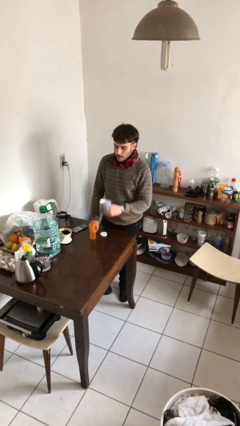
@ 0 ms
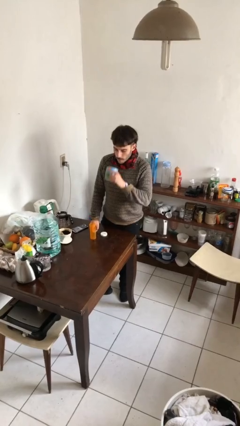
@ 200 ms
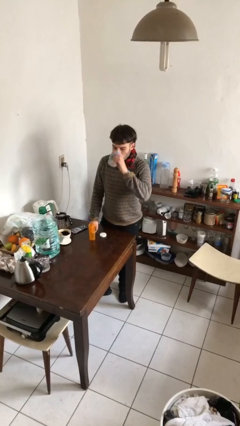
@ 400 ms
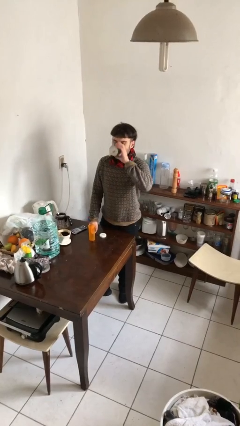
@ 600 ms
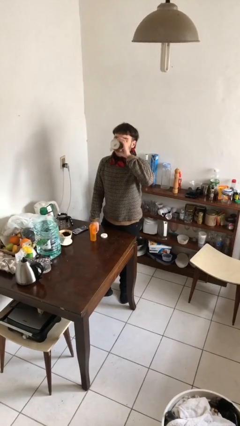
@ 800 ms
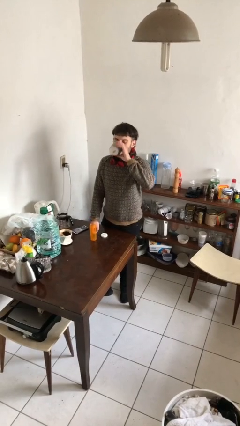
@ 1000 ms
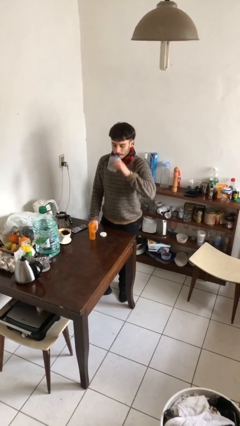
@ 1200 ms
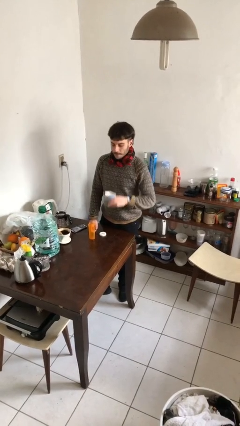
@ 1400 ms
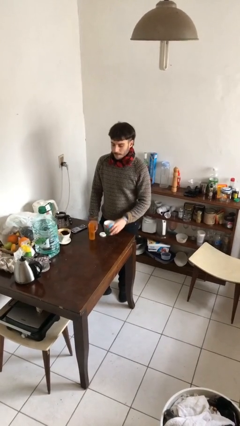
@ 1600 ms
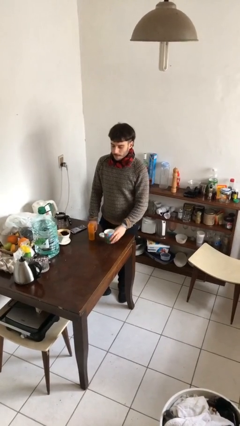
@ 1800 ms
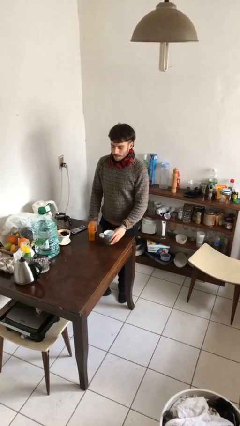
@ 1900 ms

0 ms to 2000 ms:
person drinks from cup

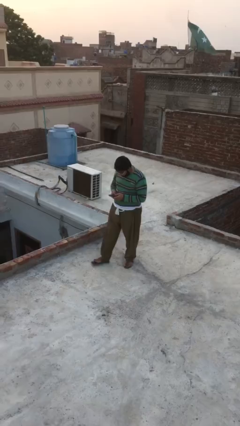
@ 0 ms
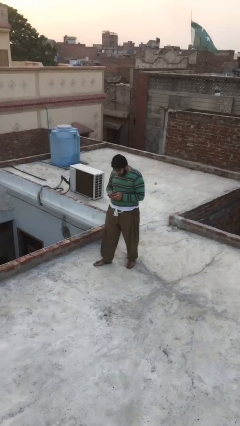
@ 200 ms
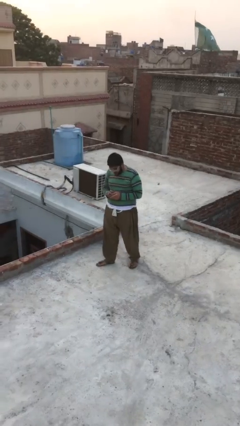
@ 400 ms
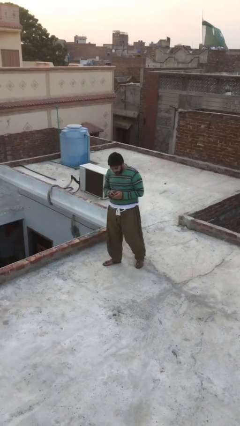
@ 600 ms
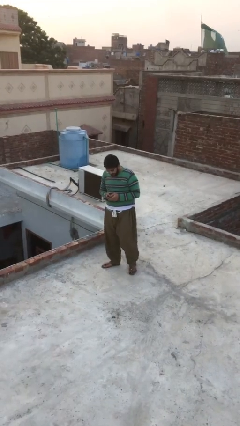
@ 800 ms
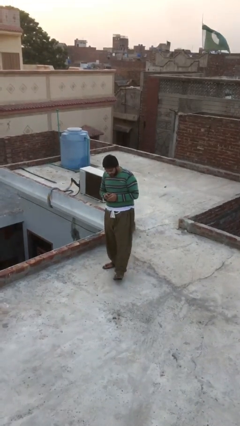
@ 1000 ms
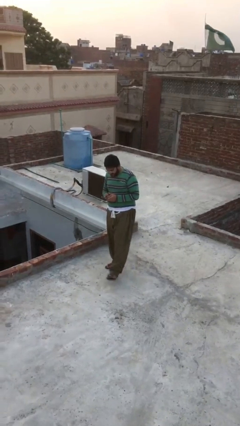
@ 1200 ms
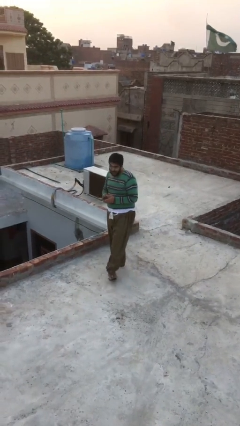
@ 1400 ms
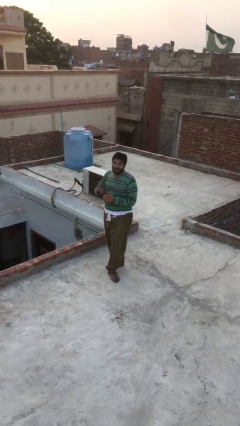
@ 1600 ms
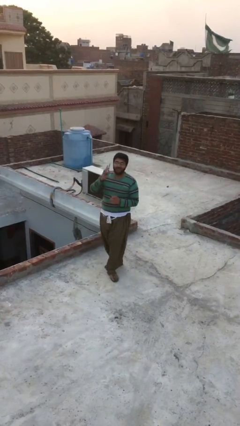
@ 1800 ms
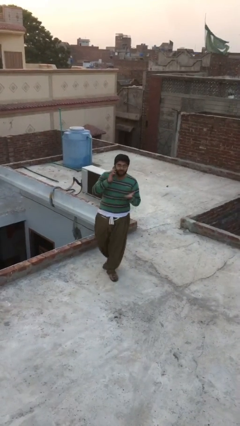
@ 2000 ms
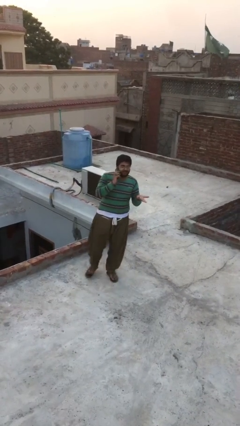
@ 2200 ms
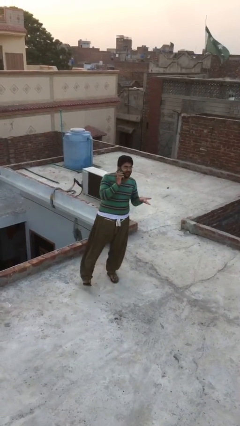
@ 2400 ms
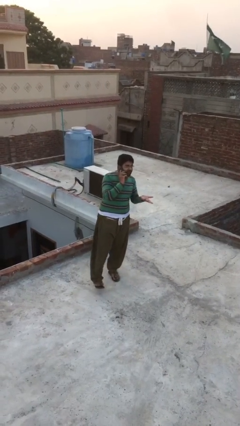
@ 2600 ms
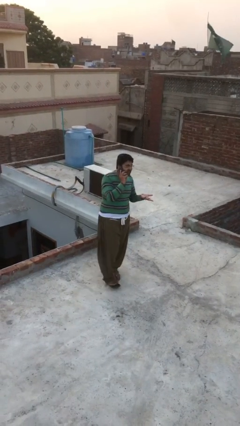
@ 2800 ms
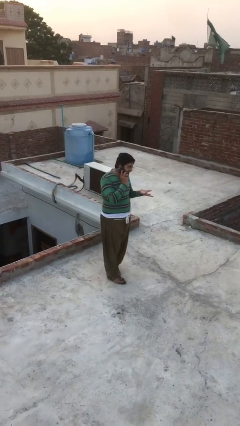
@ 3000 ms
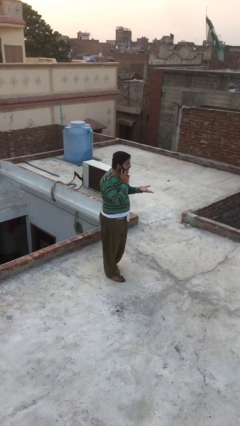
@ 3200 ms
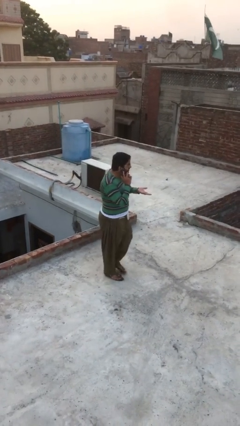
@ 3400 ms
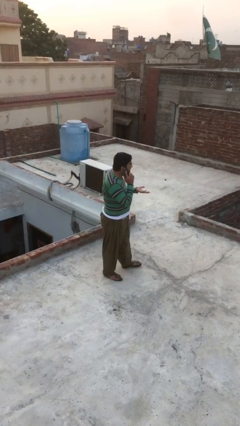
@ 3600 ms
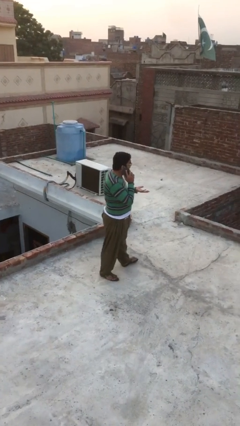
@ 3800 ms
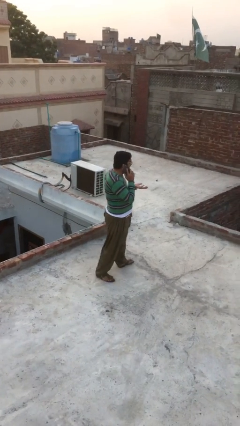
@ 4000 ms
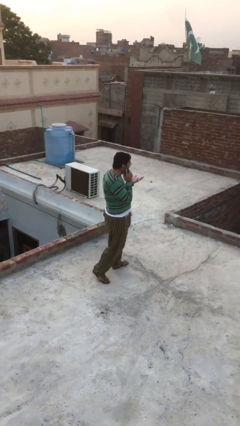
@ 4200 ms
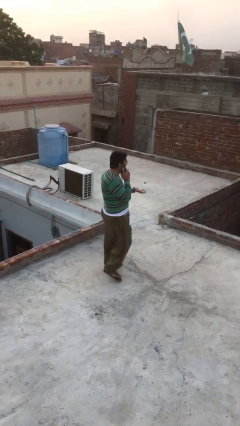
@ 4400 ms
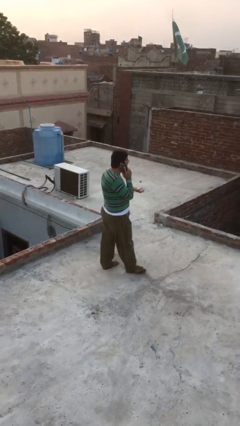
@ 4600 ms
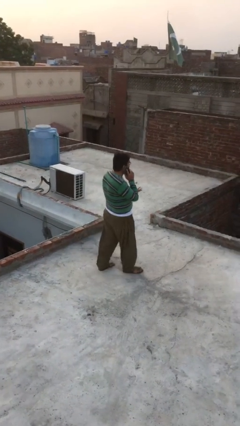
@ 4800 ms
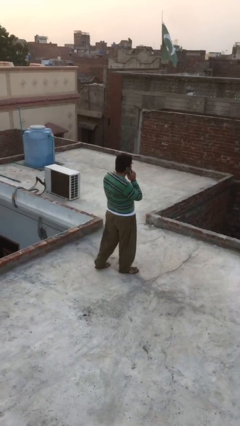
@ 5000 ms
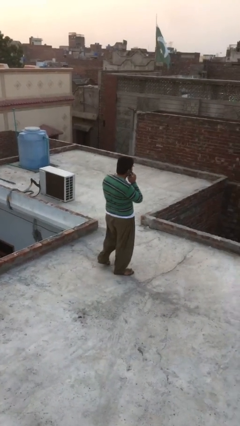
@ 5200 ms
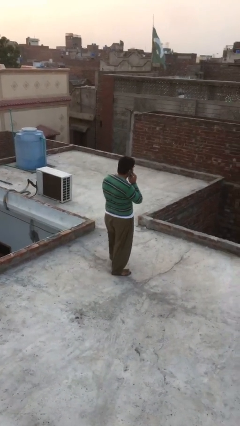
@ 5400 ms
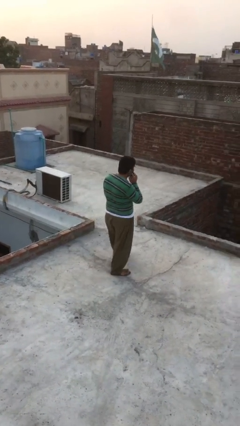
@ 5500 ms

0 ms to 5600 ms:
person talks on phone

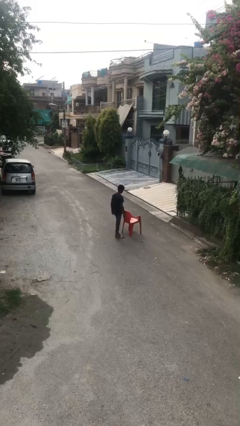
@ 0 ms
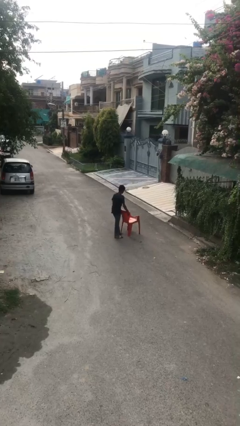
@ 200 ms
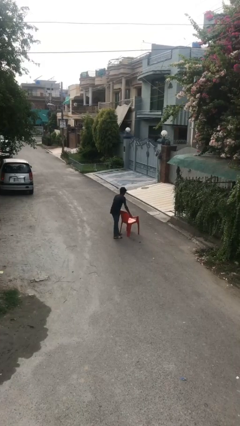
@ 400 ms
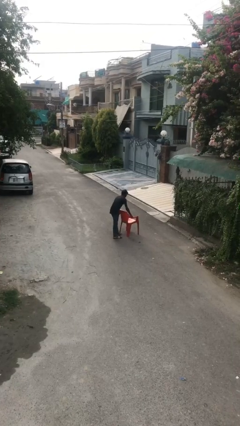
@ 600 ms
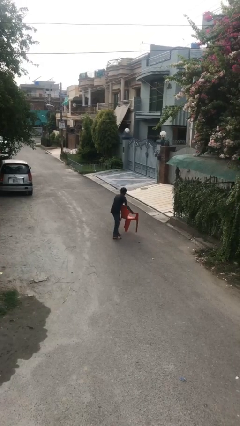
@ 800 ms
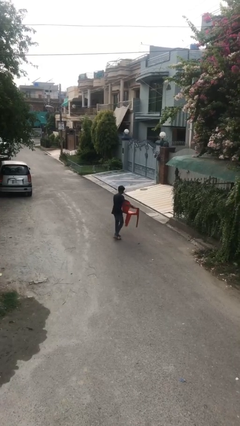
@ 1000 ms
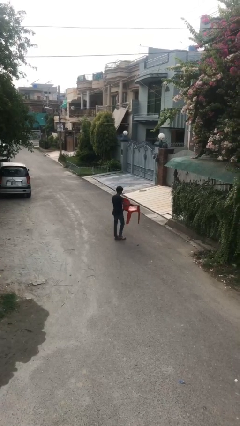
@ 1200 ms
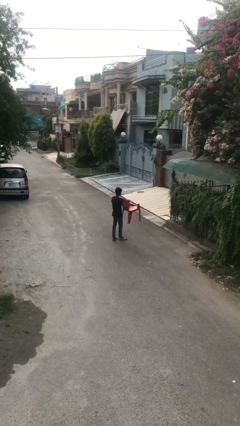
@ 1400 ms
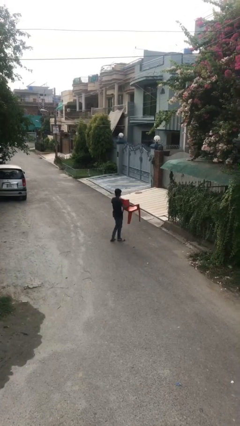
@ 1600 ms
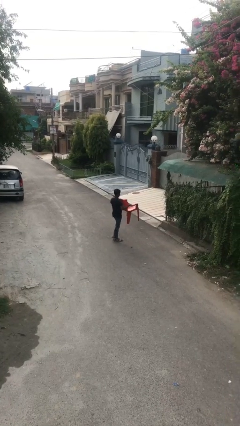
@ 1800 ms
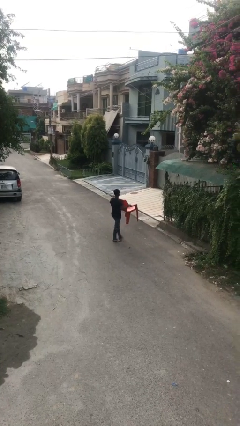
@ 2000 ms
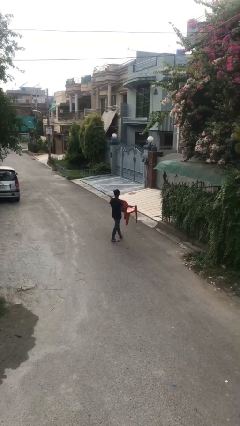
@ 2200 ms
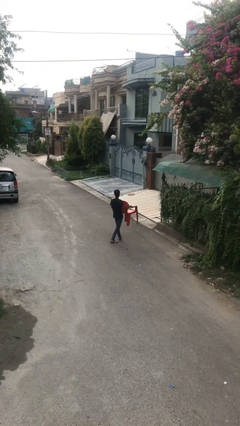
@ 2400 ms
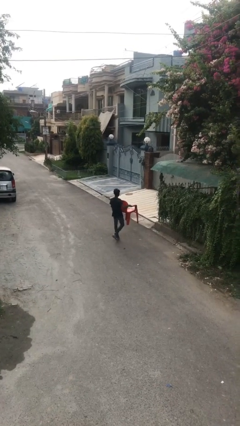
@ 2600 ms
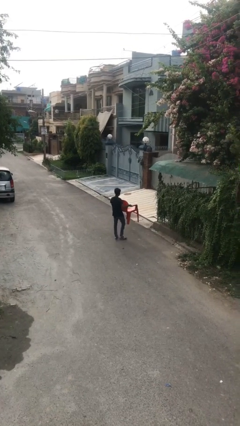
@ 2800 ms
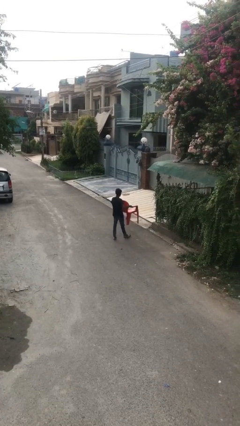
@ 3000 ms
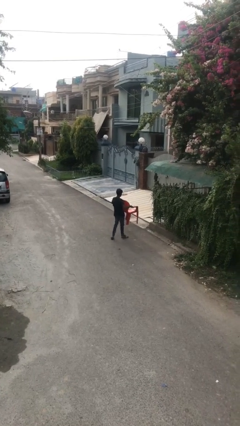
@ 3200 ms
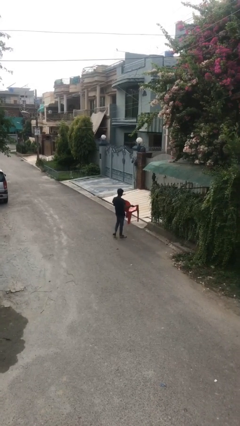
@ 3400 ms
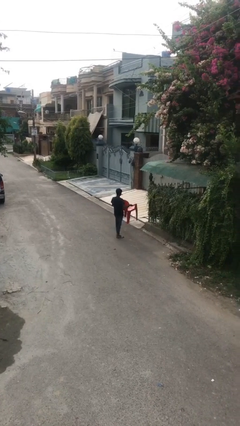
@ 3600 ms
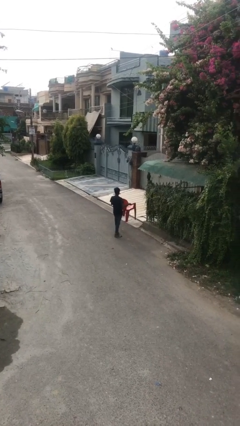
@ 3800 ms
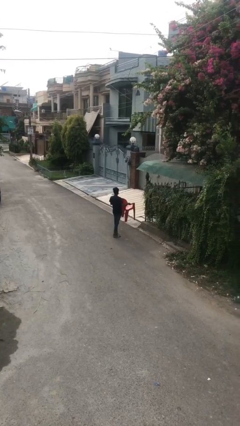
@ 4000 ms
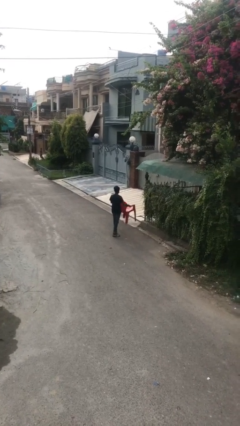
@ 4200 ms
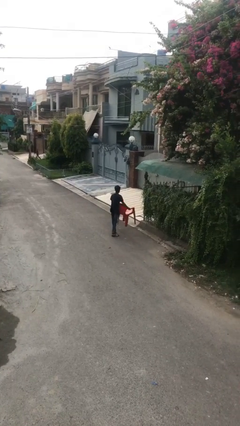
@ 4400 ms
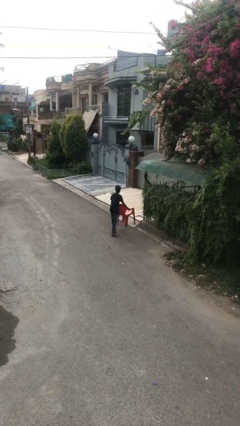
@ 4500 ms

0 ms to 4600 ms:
person carries heavy object

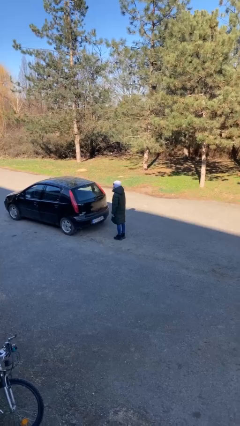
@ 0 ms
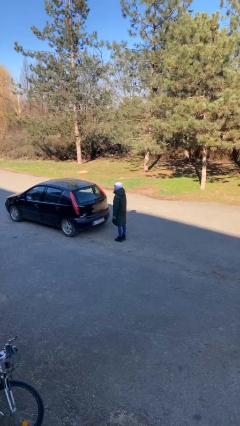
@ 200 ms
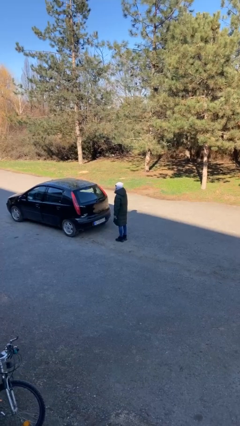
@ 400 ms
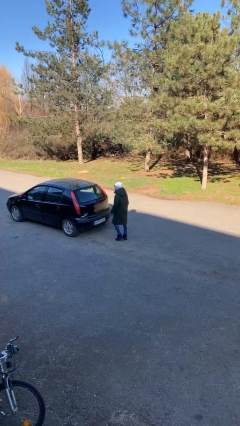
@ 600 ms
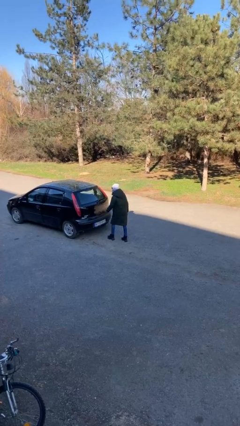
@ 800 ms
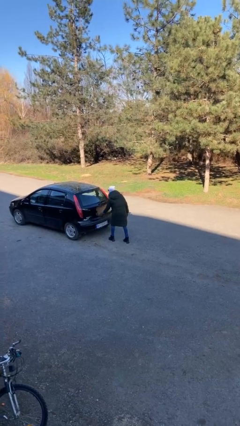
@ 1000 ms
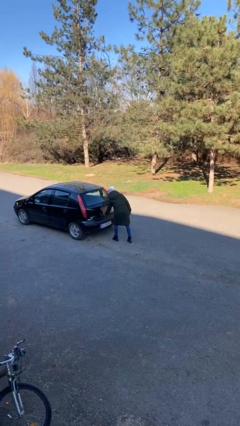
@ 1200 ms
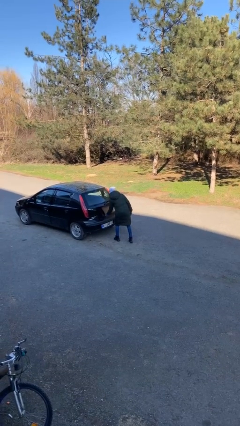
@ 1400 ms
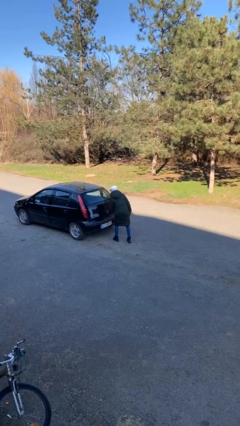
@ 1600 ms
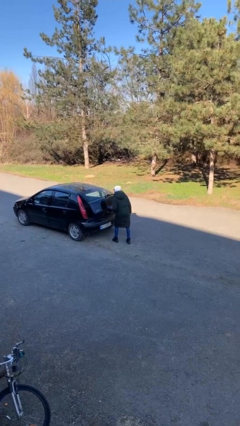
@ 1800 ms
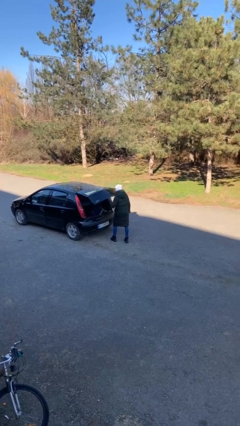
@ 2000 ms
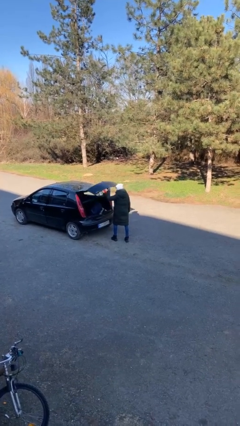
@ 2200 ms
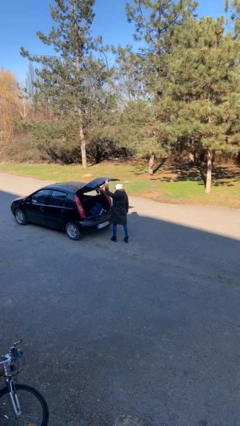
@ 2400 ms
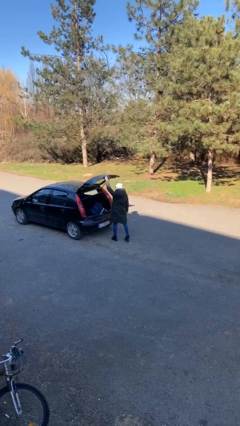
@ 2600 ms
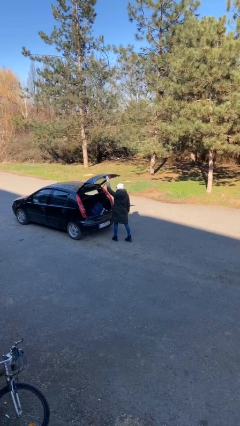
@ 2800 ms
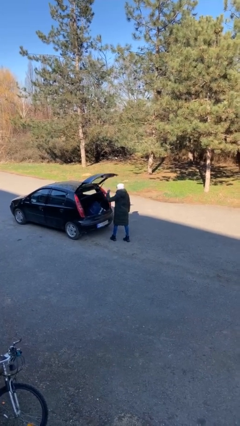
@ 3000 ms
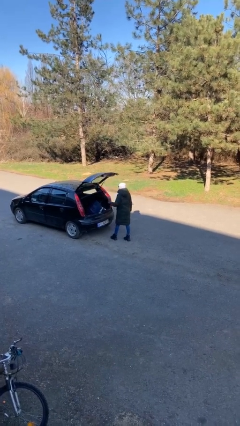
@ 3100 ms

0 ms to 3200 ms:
person opens car trunk

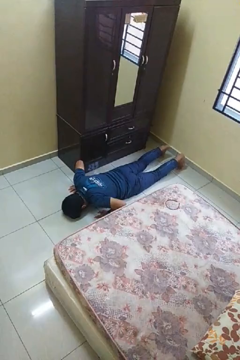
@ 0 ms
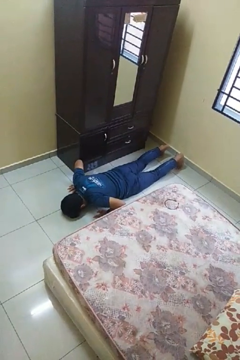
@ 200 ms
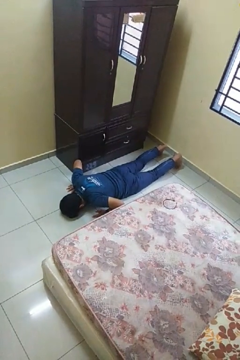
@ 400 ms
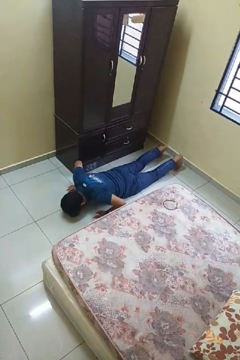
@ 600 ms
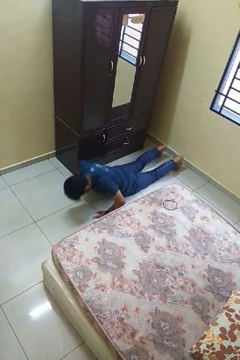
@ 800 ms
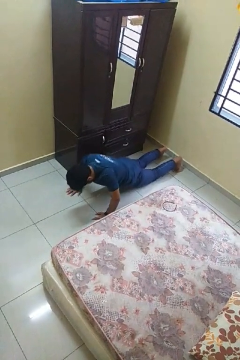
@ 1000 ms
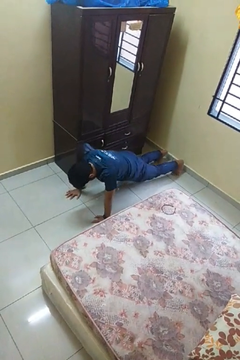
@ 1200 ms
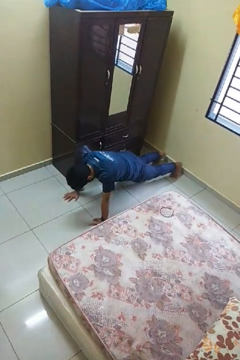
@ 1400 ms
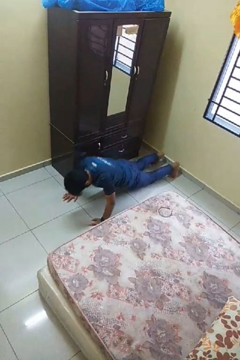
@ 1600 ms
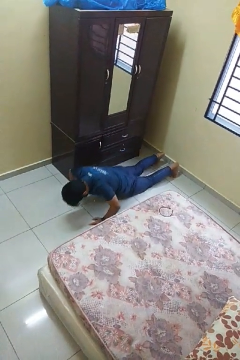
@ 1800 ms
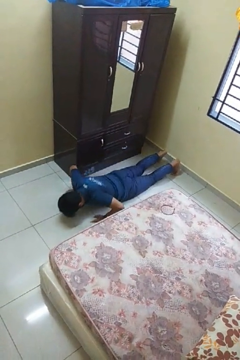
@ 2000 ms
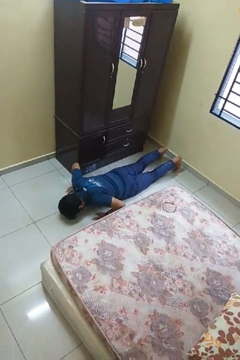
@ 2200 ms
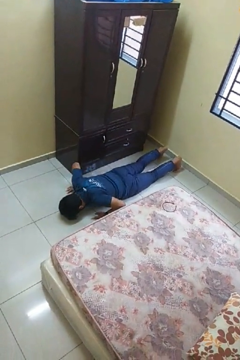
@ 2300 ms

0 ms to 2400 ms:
person exercises with pushup

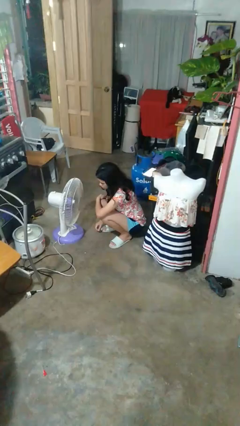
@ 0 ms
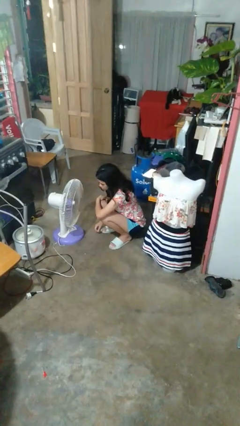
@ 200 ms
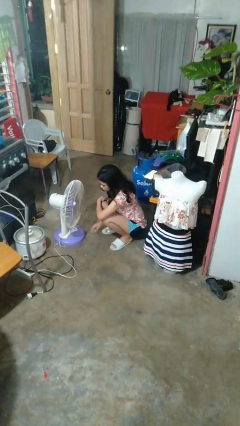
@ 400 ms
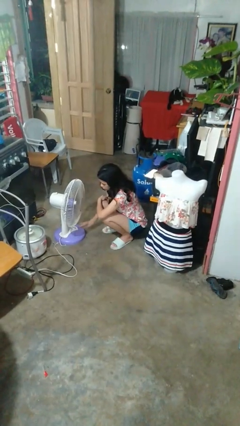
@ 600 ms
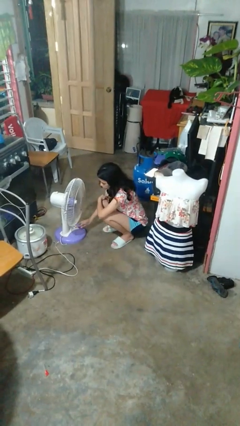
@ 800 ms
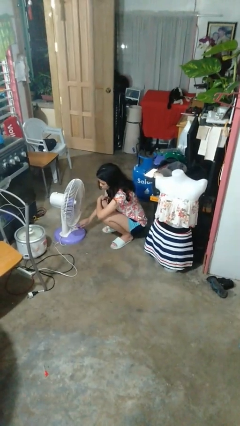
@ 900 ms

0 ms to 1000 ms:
person turns off fan
